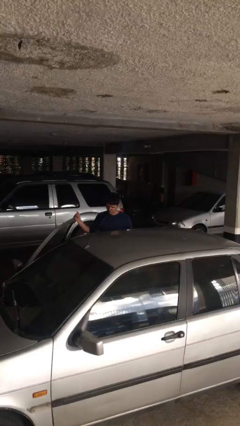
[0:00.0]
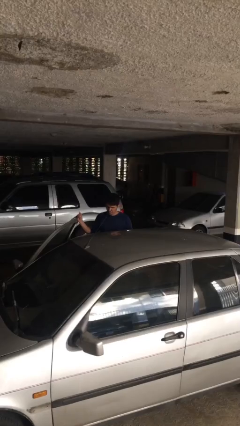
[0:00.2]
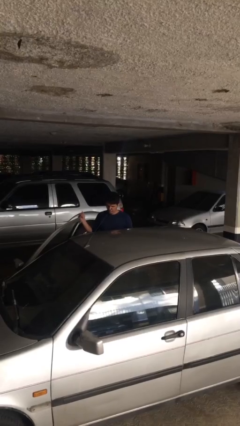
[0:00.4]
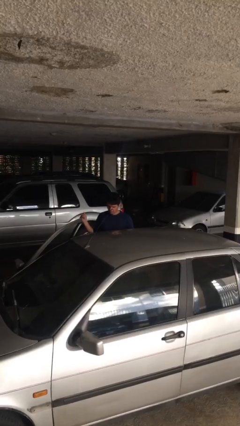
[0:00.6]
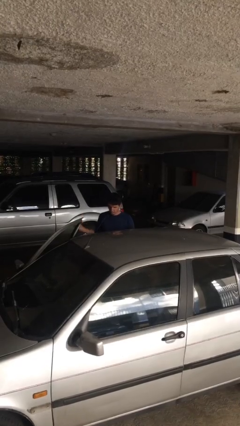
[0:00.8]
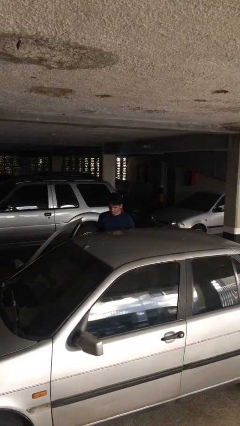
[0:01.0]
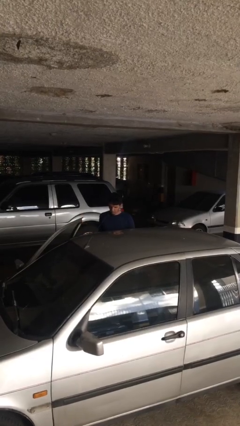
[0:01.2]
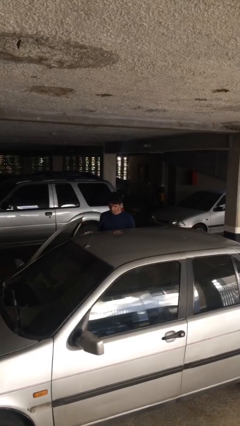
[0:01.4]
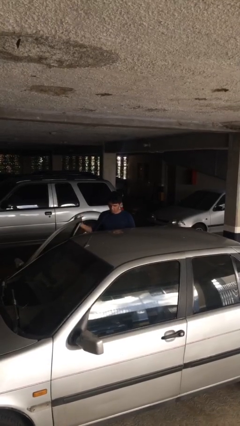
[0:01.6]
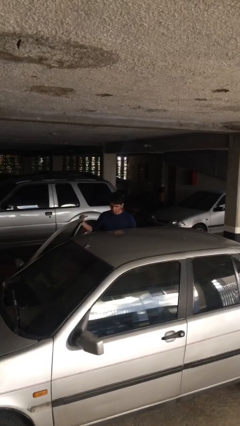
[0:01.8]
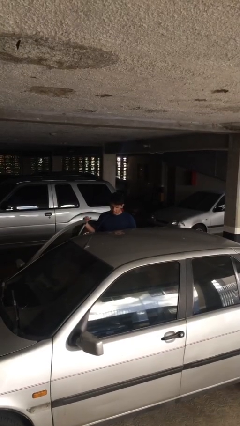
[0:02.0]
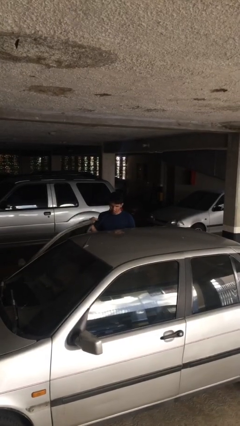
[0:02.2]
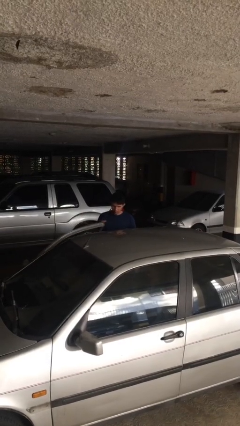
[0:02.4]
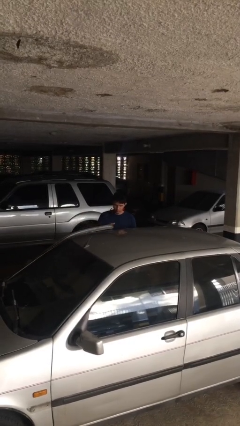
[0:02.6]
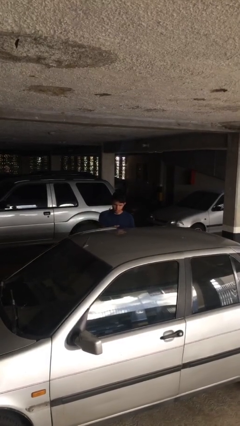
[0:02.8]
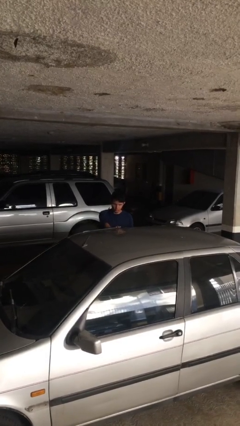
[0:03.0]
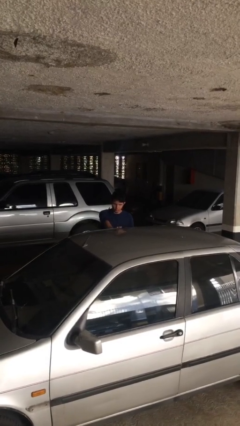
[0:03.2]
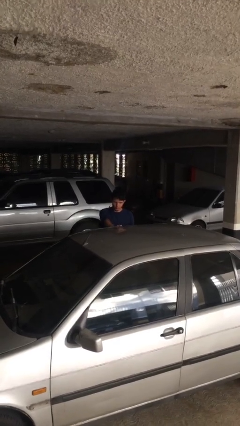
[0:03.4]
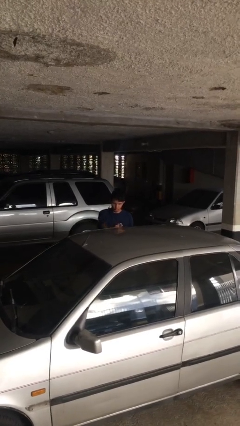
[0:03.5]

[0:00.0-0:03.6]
person closes car door

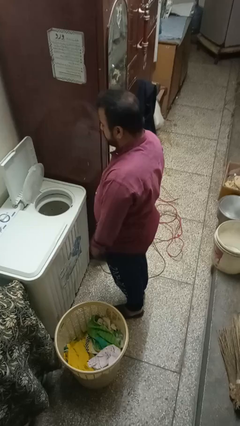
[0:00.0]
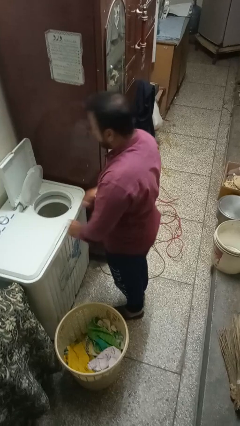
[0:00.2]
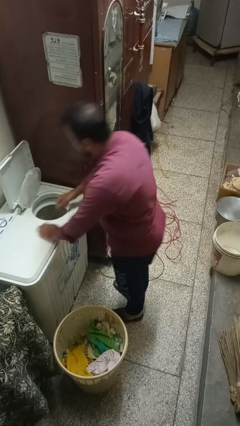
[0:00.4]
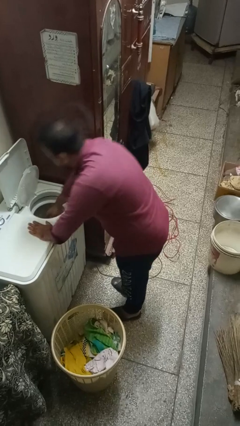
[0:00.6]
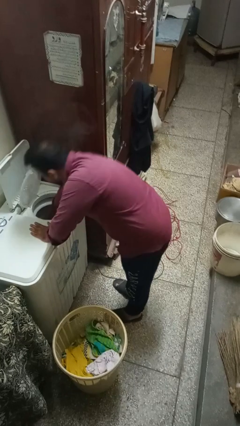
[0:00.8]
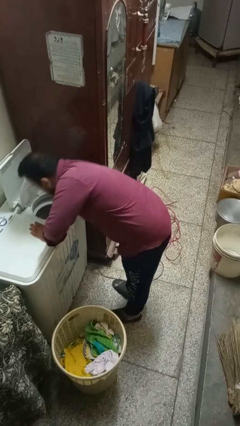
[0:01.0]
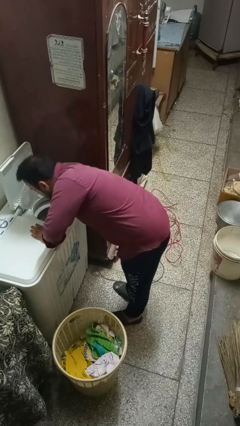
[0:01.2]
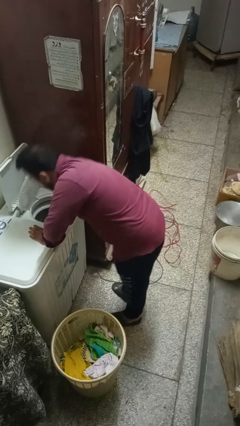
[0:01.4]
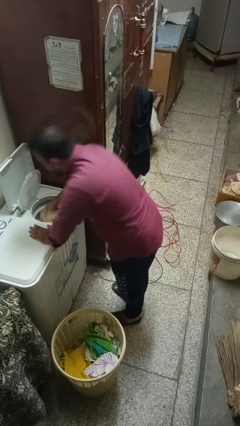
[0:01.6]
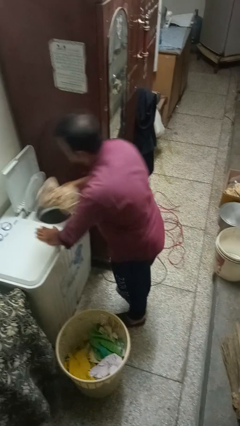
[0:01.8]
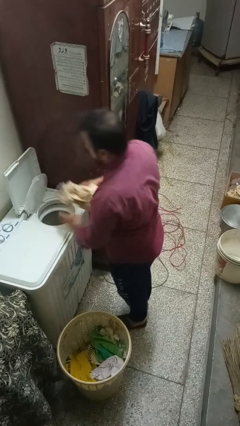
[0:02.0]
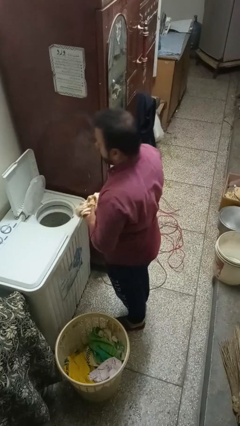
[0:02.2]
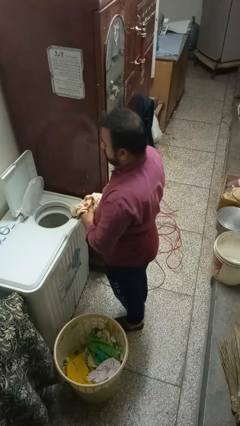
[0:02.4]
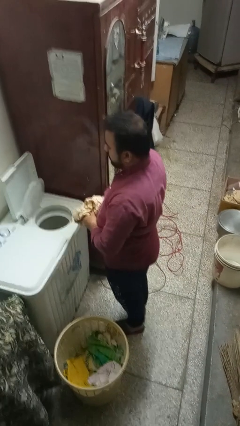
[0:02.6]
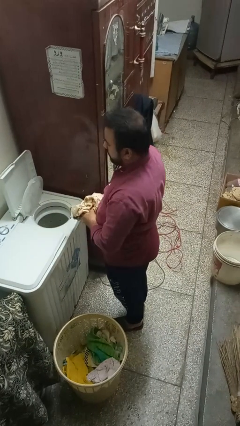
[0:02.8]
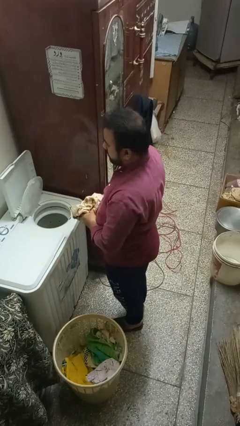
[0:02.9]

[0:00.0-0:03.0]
person unloads dryer

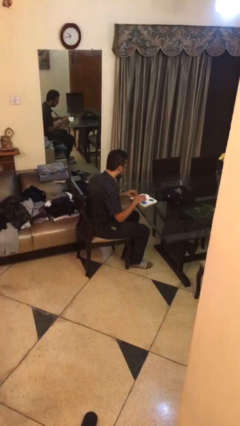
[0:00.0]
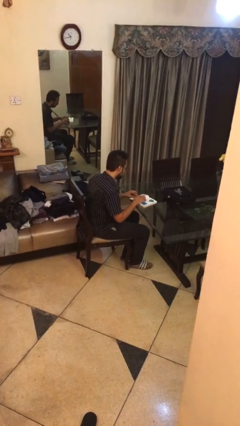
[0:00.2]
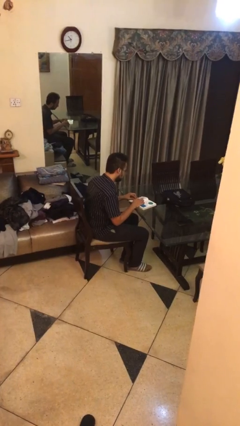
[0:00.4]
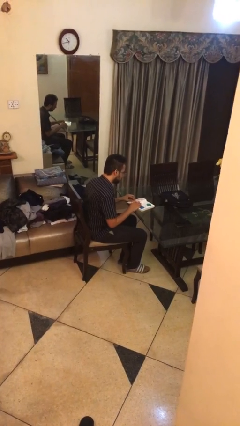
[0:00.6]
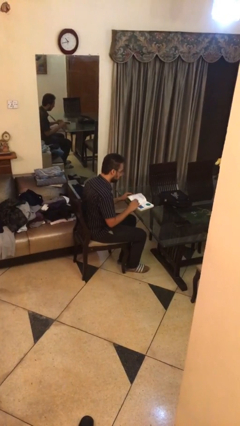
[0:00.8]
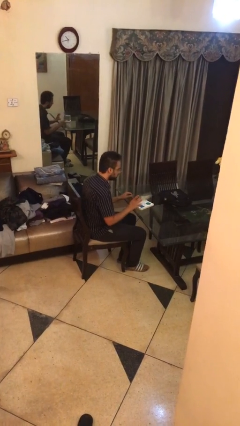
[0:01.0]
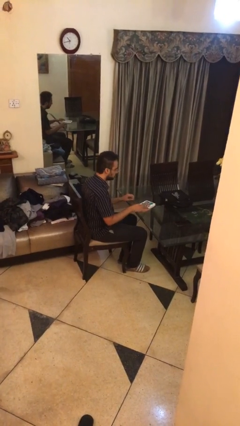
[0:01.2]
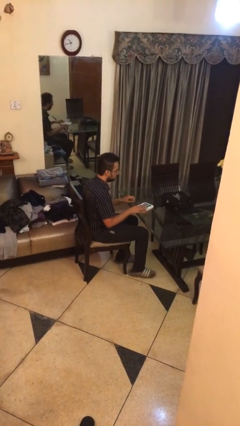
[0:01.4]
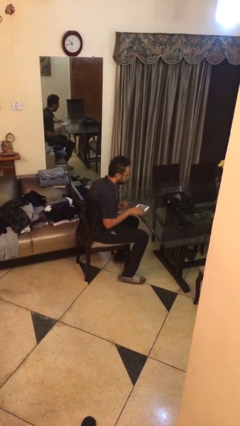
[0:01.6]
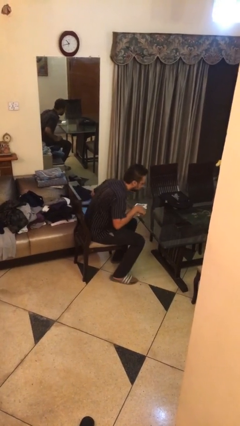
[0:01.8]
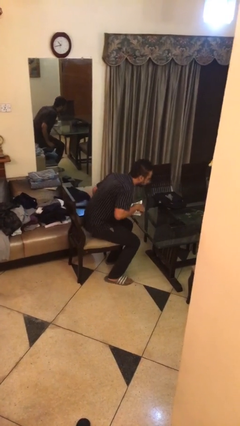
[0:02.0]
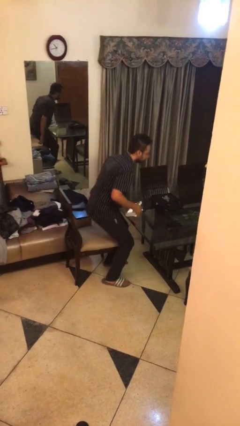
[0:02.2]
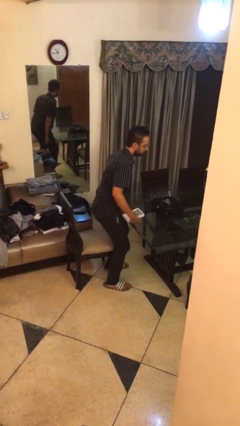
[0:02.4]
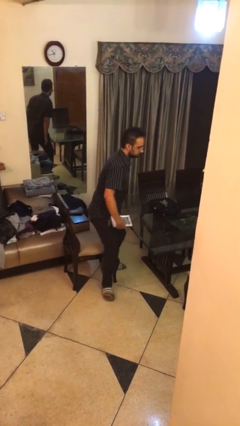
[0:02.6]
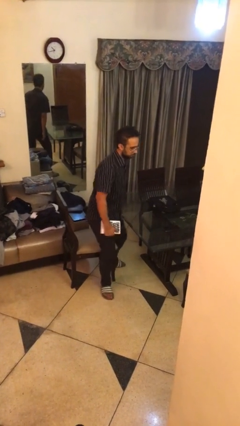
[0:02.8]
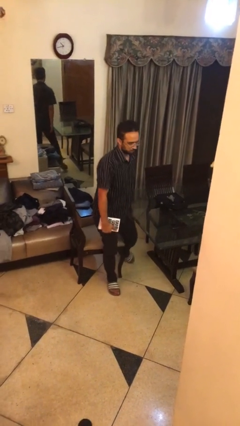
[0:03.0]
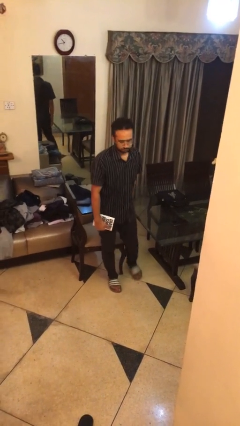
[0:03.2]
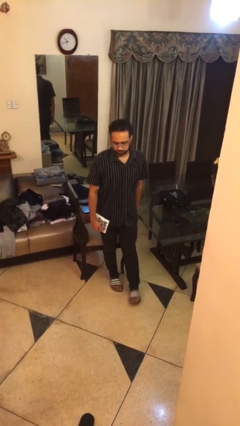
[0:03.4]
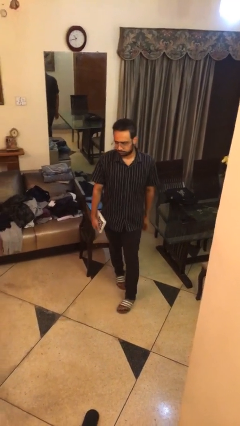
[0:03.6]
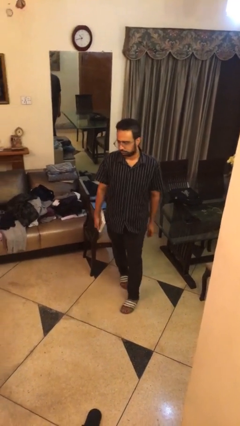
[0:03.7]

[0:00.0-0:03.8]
person stands up

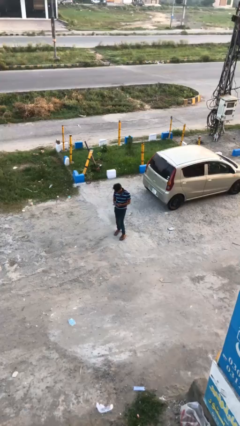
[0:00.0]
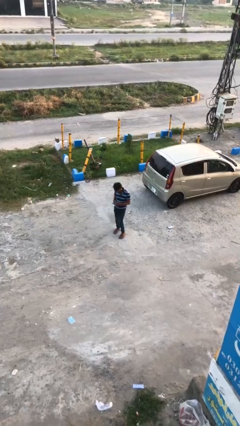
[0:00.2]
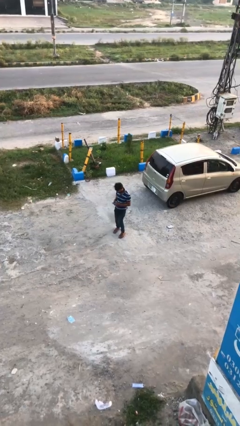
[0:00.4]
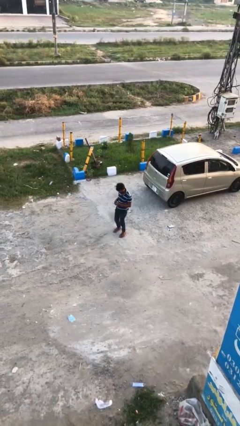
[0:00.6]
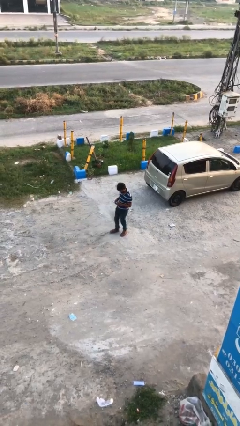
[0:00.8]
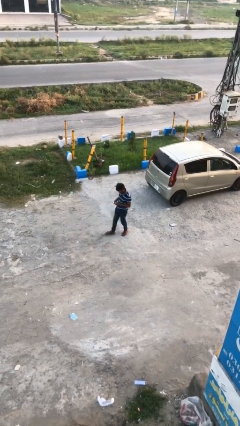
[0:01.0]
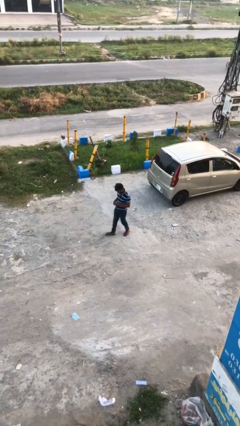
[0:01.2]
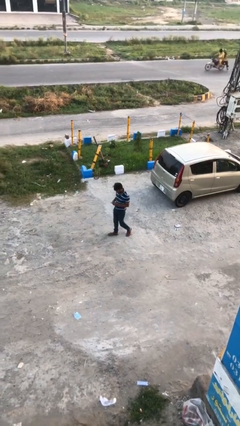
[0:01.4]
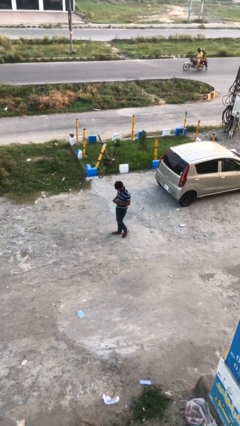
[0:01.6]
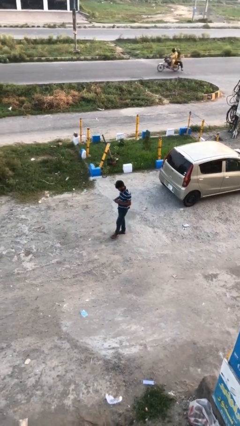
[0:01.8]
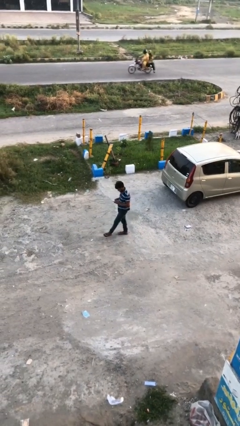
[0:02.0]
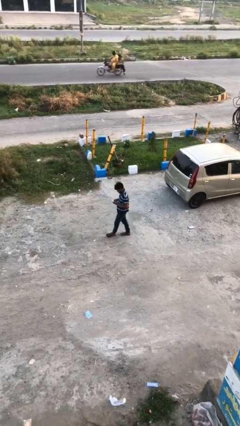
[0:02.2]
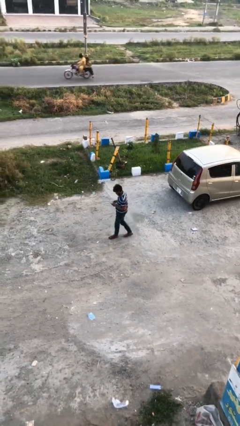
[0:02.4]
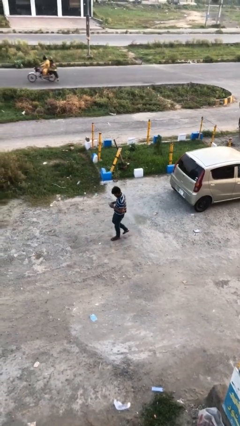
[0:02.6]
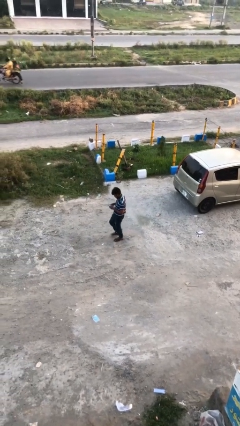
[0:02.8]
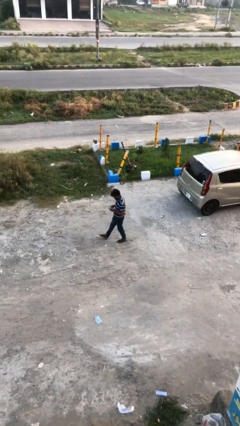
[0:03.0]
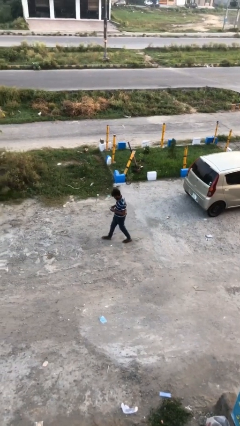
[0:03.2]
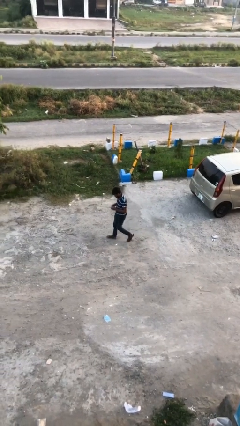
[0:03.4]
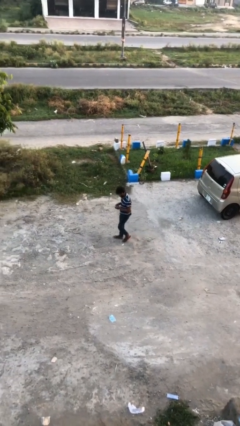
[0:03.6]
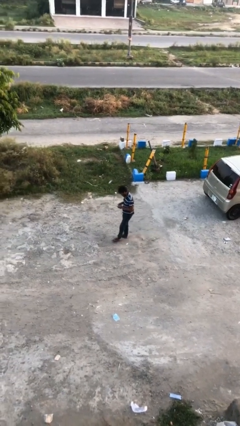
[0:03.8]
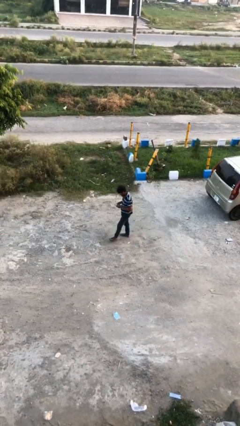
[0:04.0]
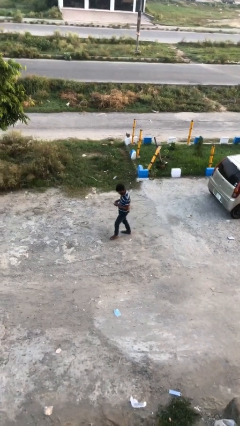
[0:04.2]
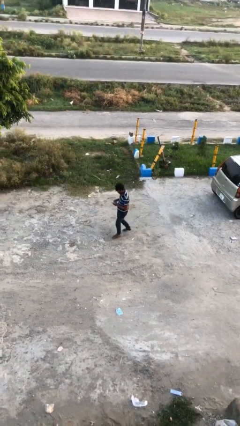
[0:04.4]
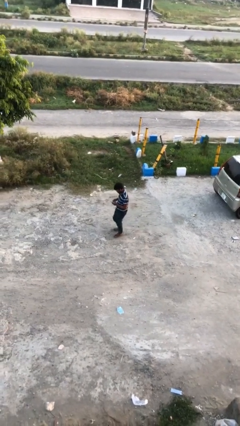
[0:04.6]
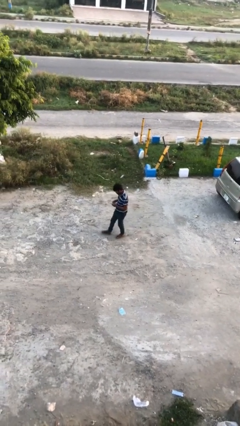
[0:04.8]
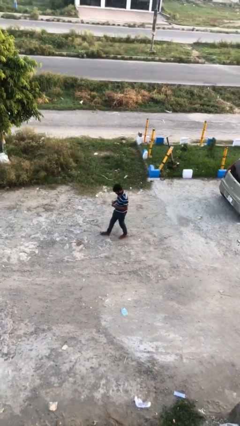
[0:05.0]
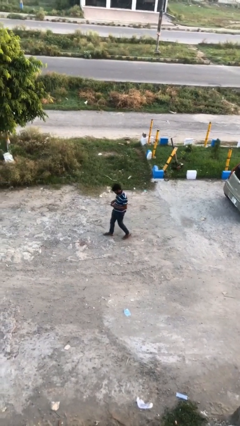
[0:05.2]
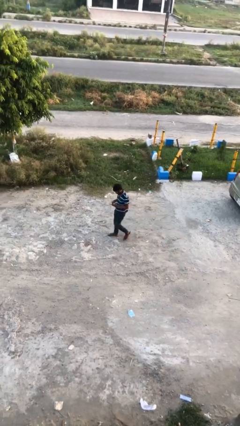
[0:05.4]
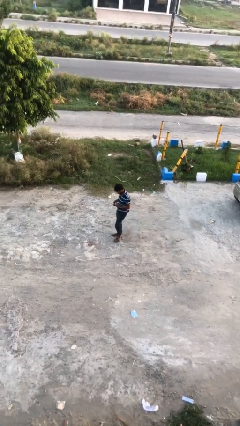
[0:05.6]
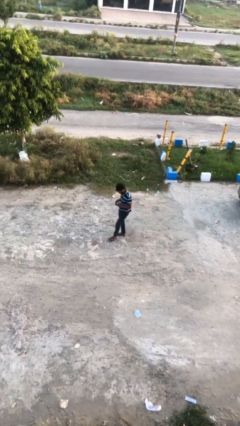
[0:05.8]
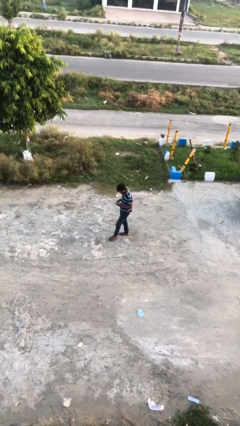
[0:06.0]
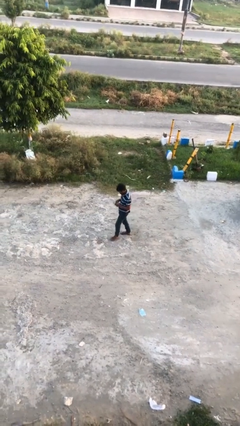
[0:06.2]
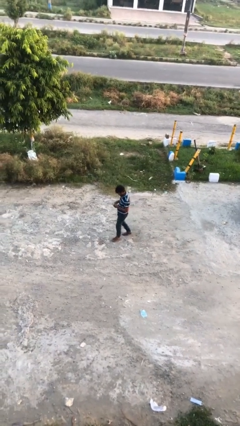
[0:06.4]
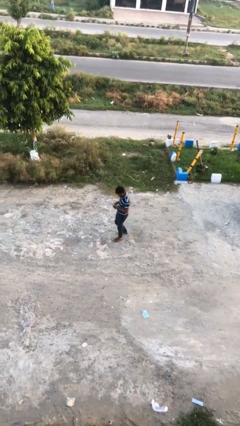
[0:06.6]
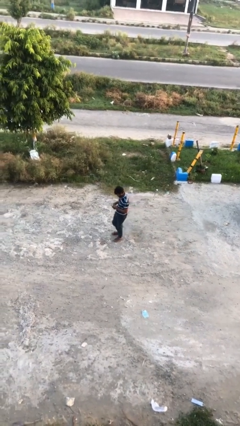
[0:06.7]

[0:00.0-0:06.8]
person texts on phone

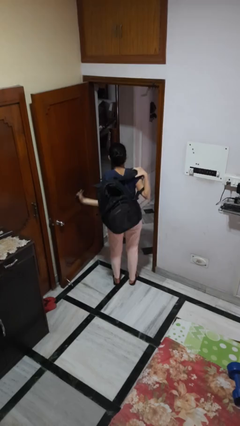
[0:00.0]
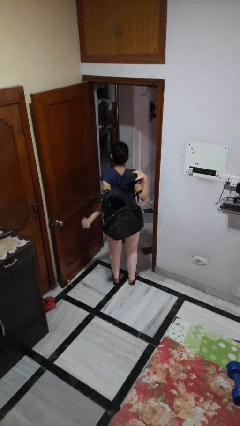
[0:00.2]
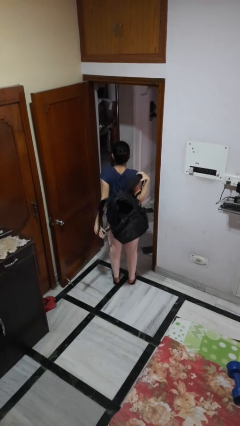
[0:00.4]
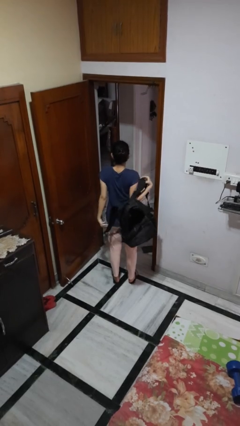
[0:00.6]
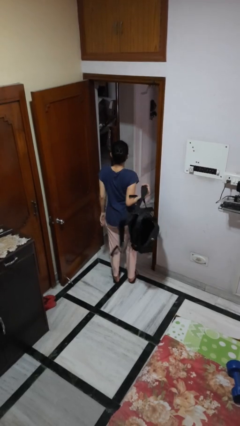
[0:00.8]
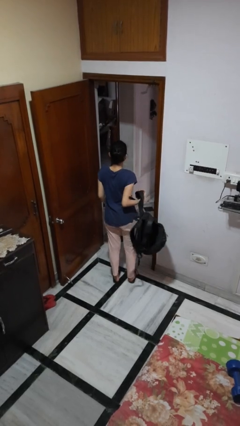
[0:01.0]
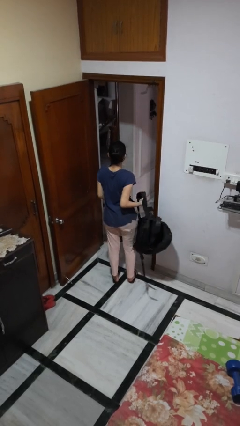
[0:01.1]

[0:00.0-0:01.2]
person takes off backpack
